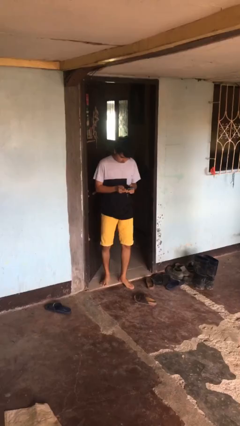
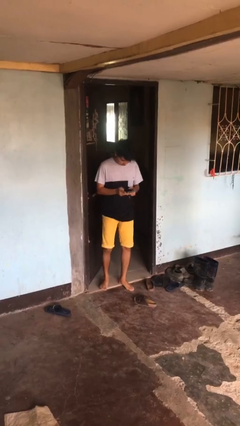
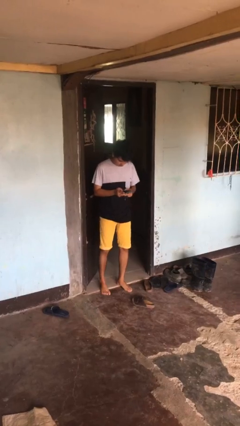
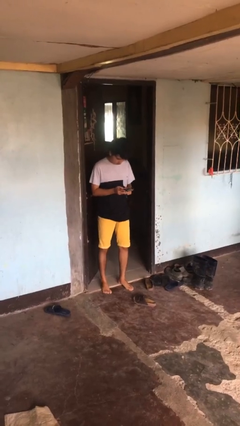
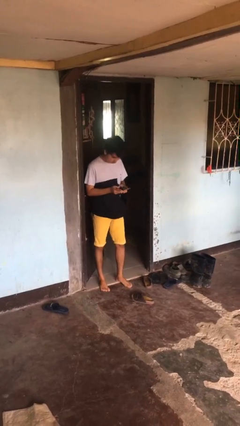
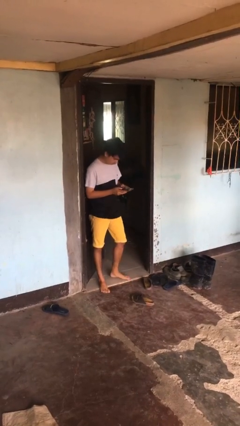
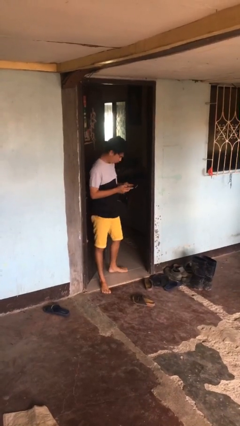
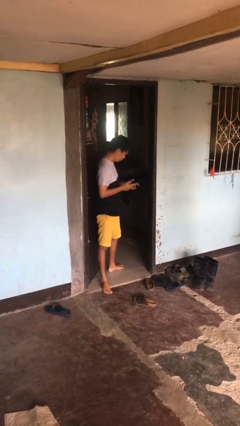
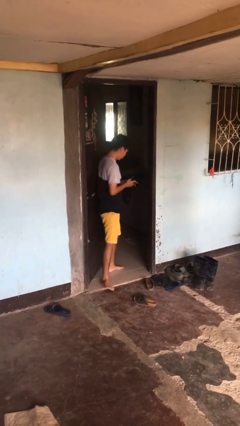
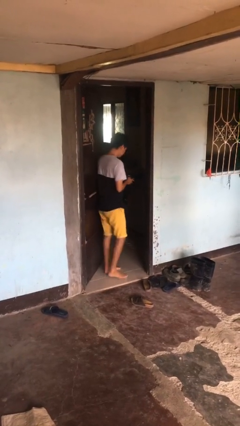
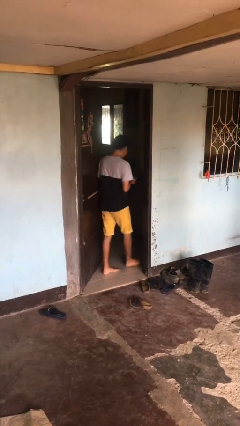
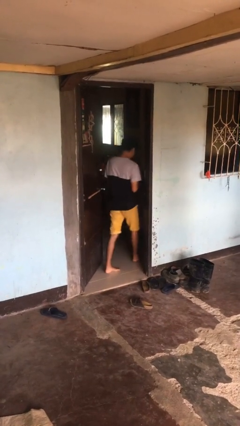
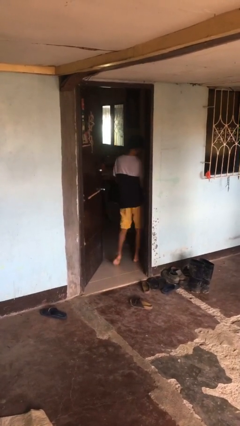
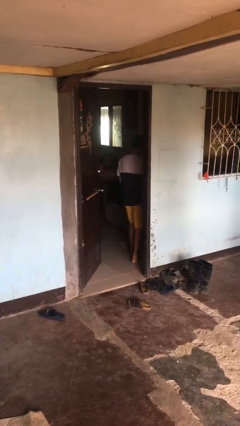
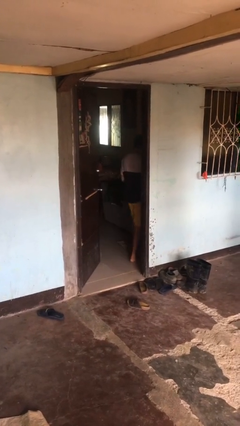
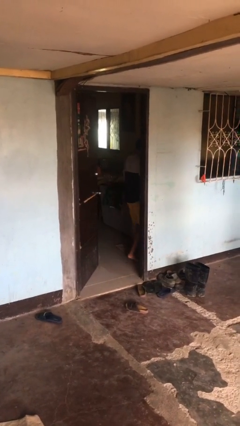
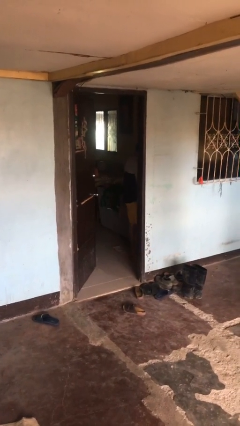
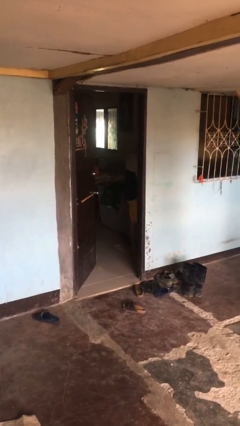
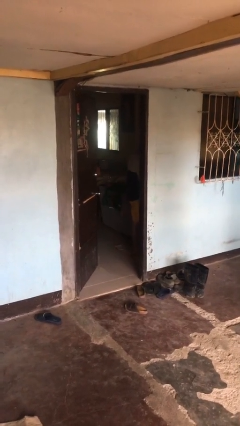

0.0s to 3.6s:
person exits scene through structure

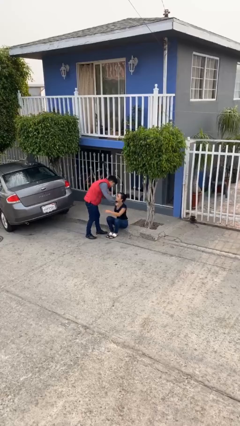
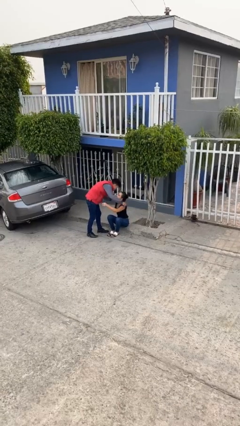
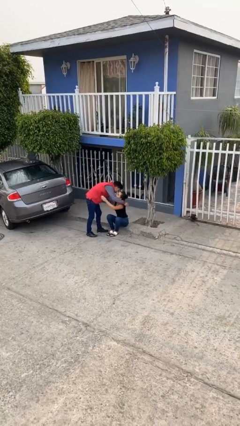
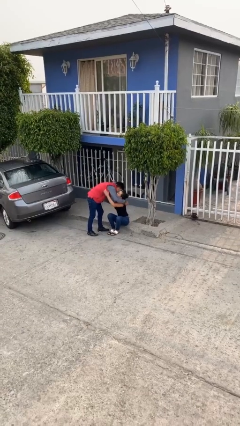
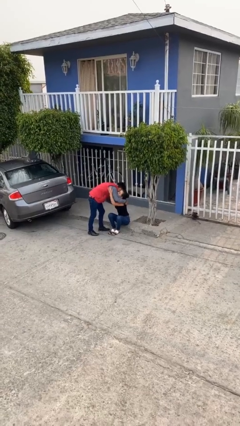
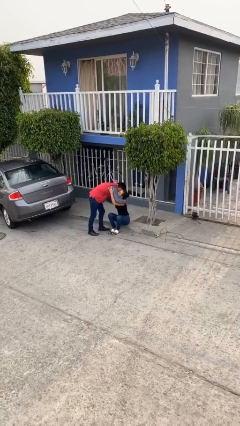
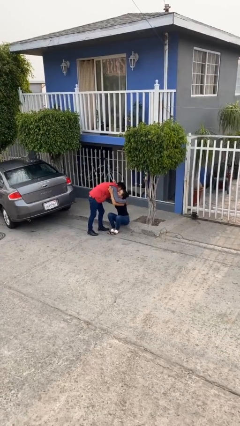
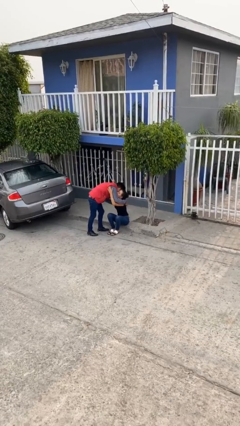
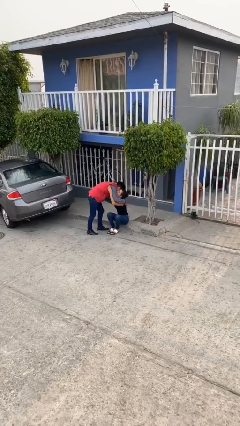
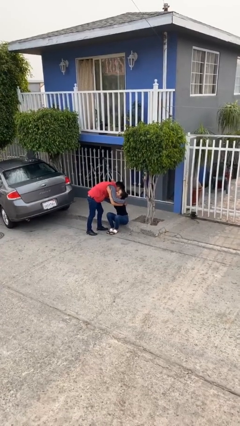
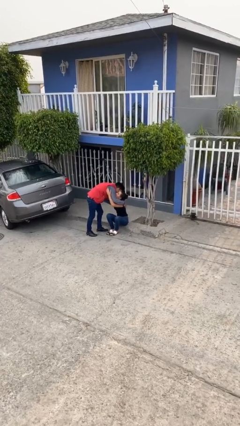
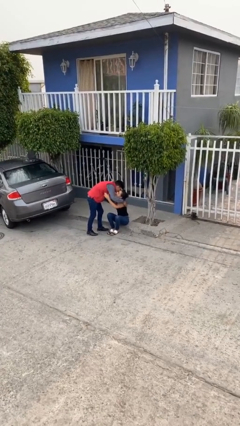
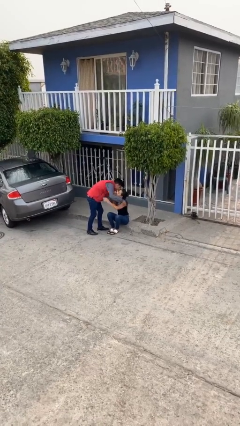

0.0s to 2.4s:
person embraces person

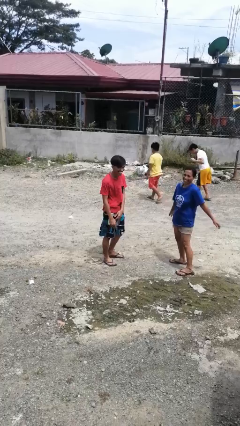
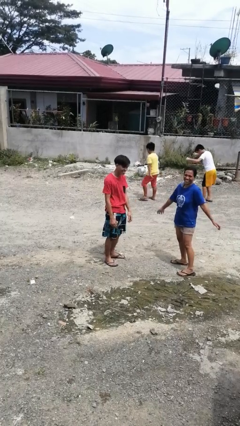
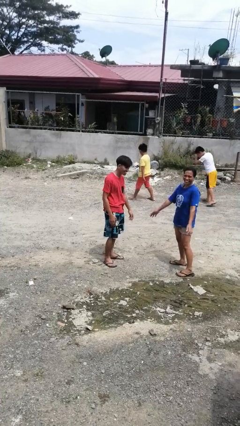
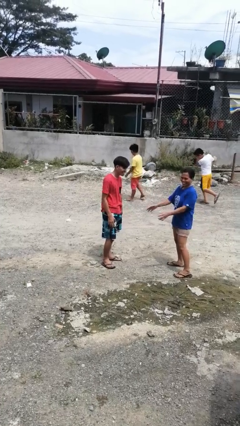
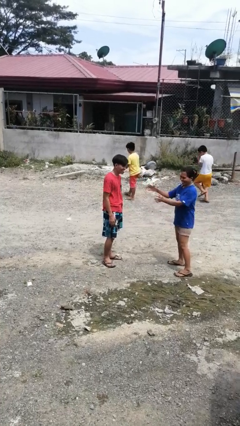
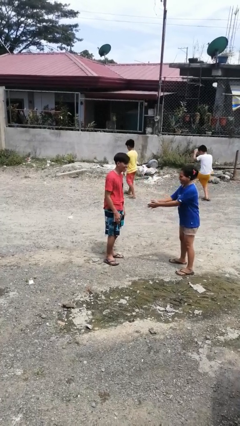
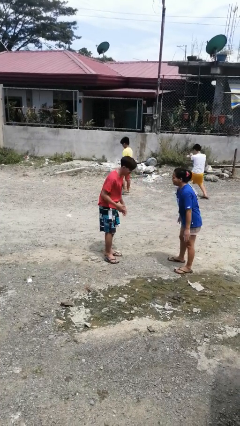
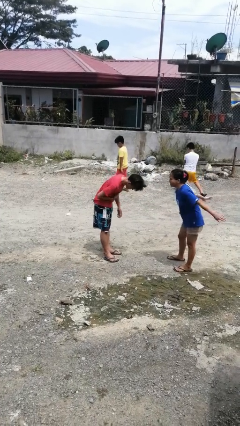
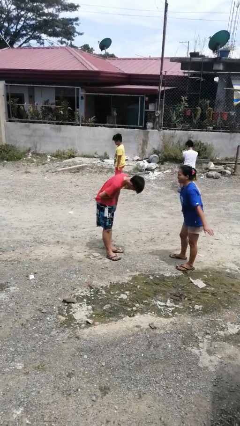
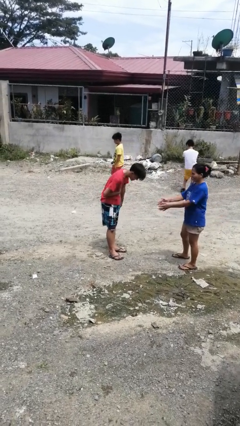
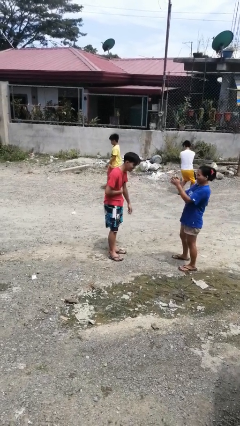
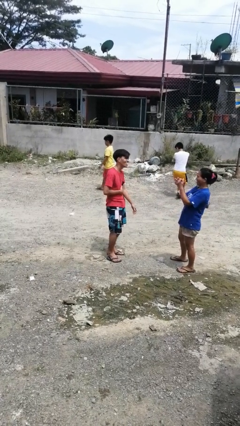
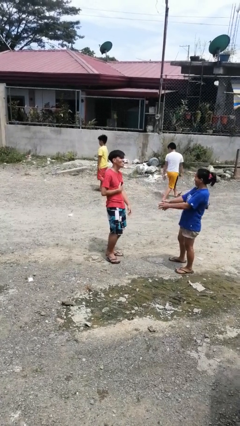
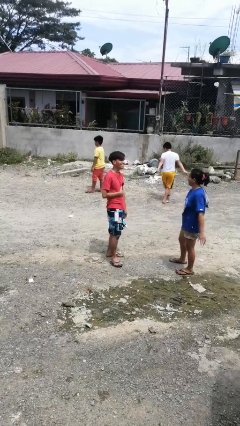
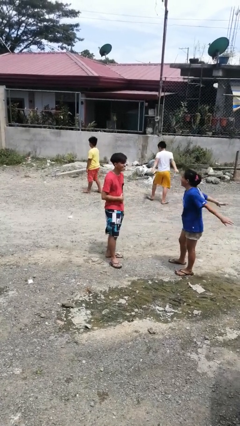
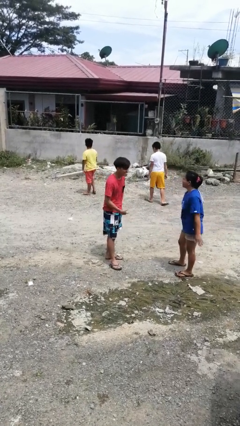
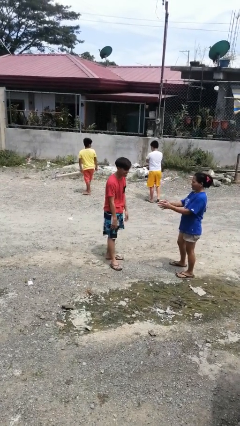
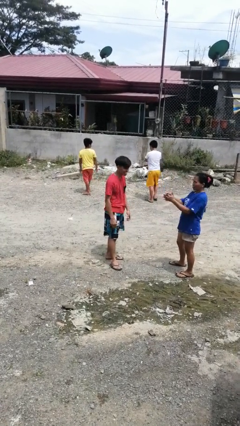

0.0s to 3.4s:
person laughs with person

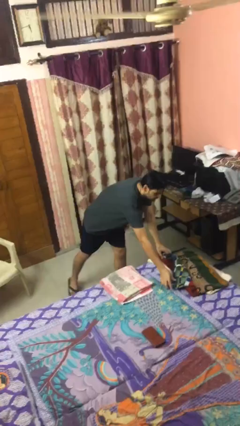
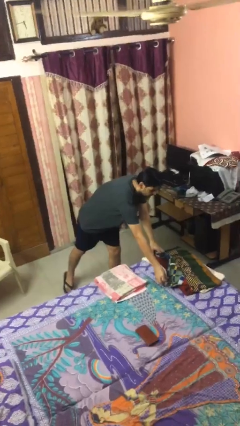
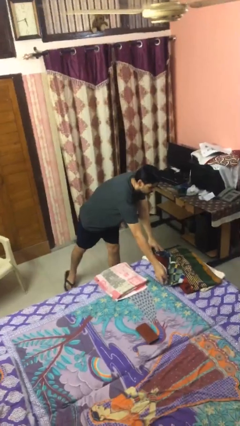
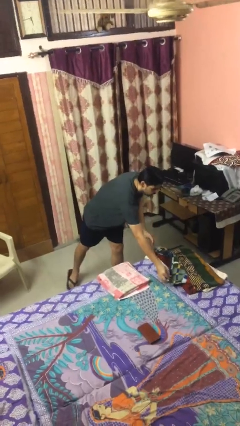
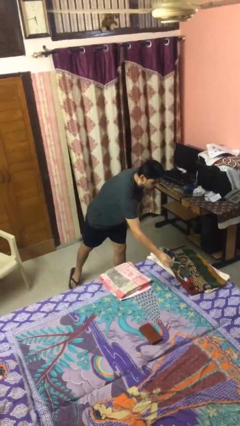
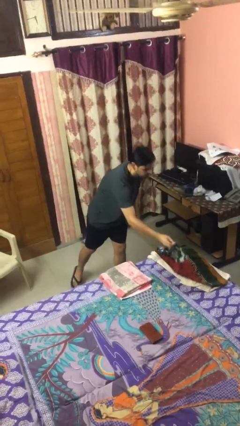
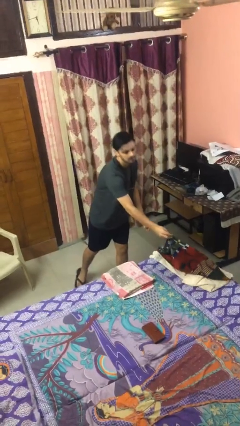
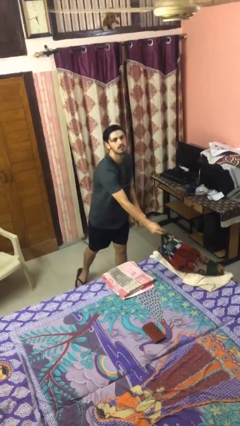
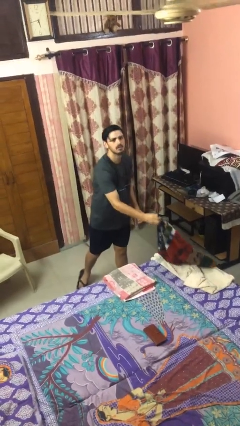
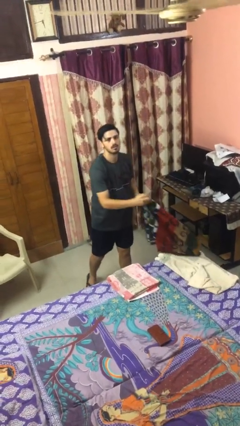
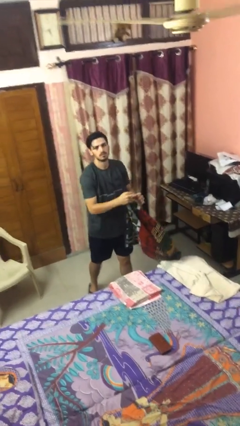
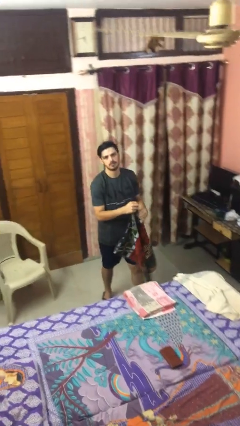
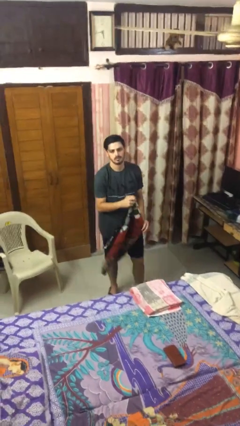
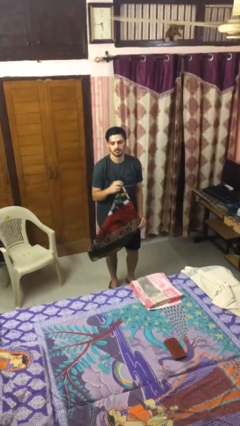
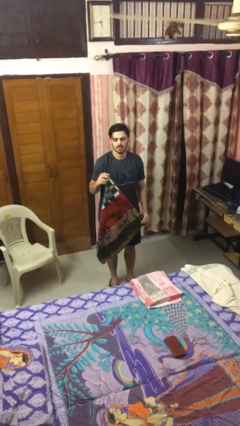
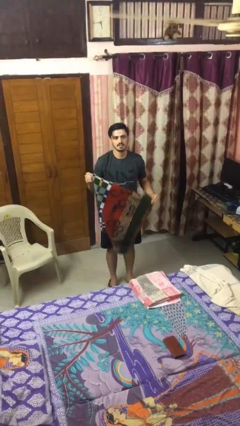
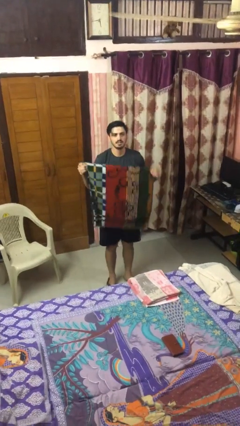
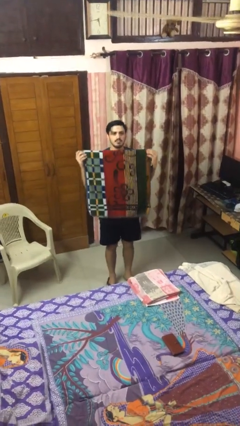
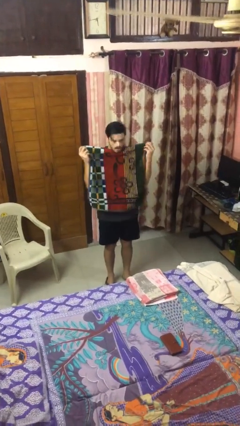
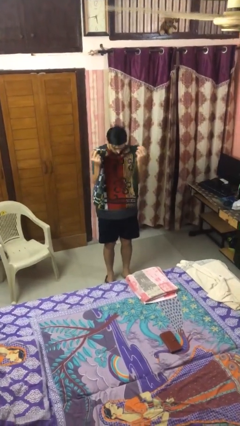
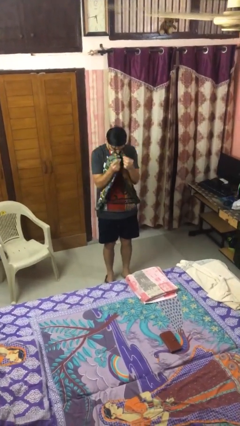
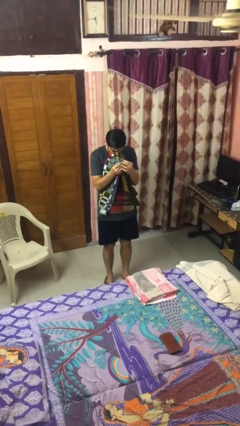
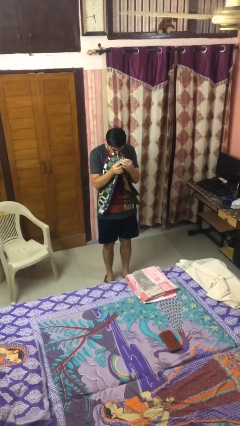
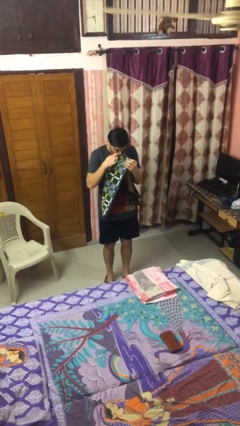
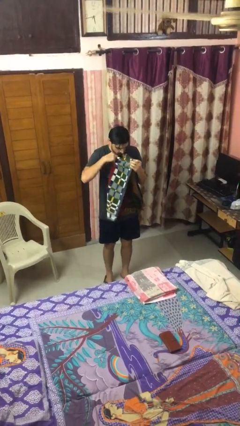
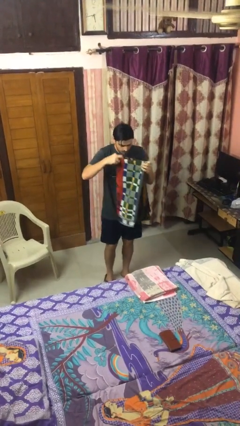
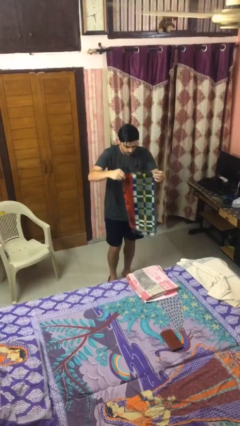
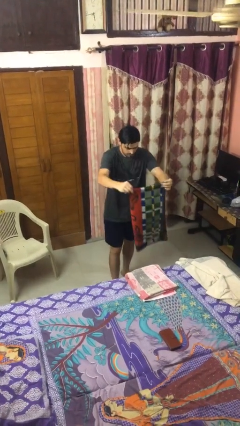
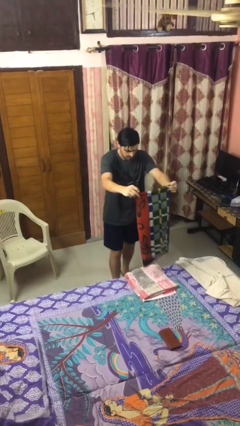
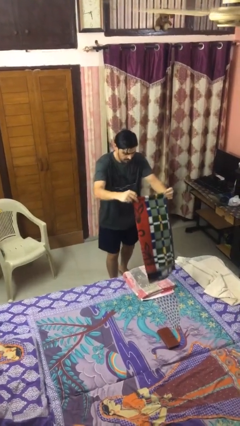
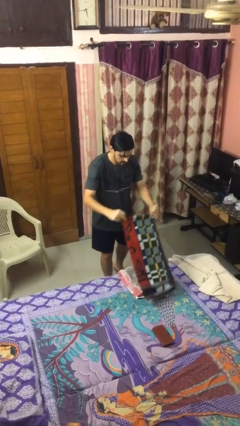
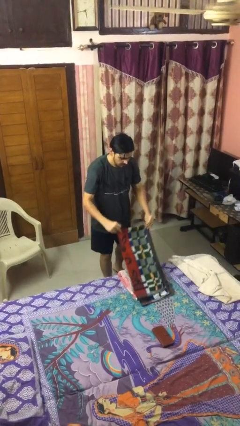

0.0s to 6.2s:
person folds towel

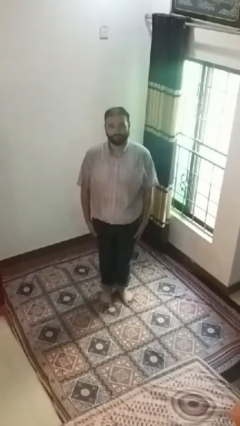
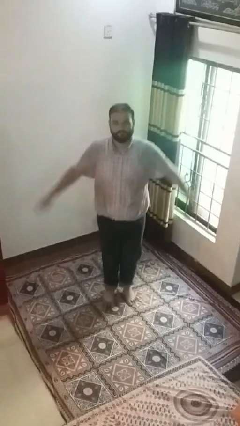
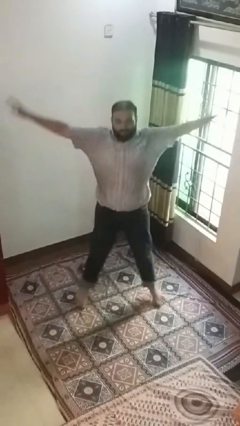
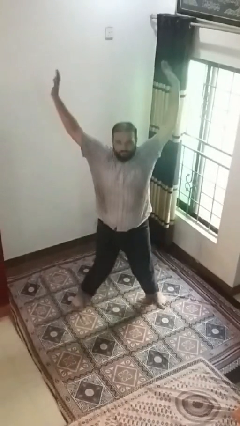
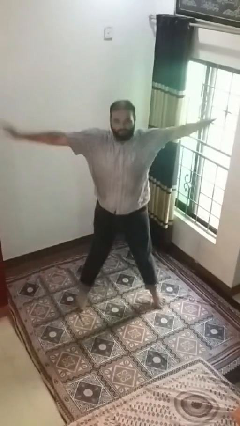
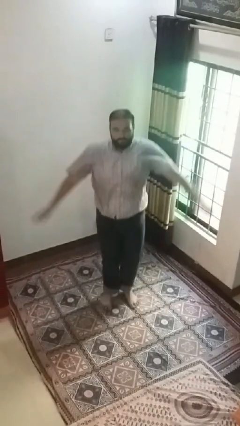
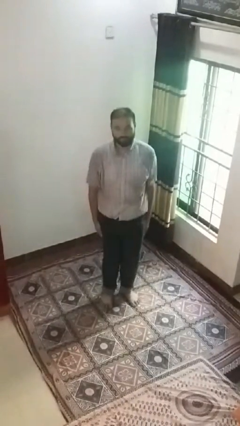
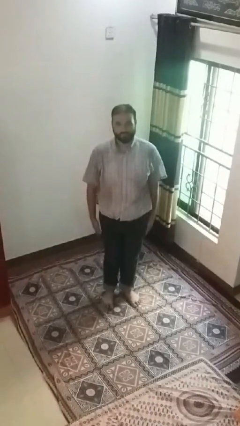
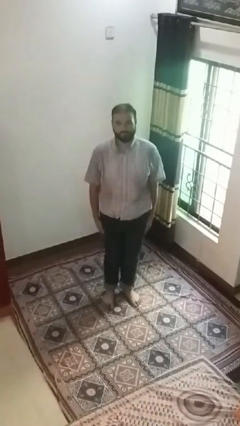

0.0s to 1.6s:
person exercises with jumping jacks
